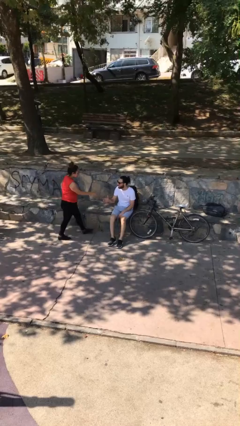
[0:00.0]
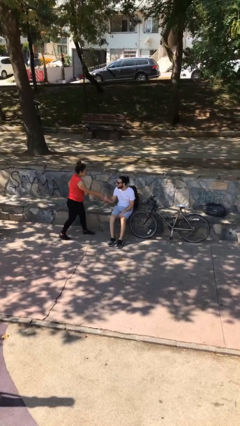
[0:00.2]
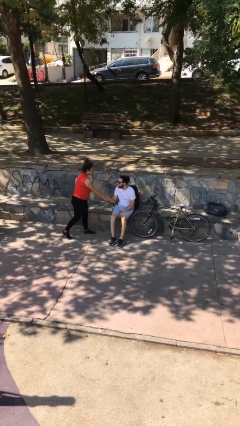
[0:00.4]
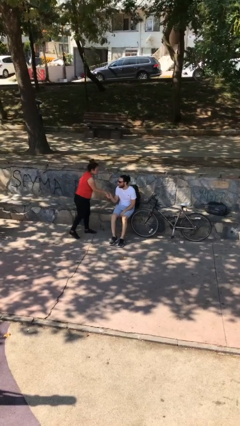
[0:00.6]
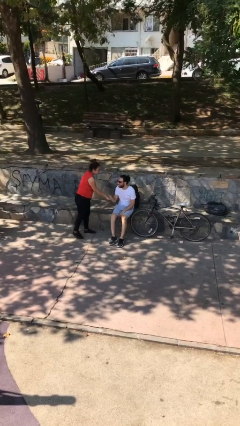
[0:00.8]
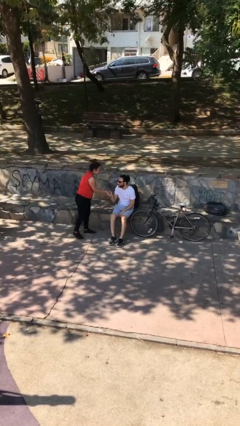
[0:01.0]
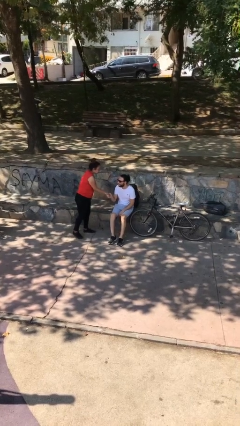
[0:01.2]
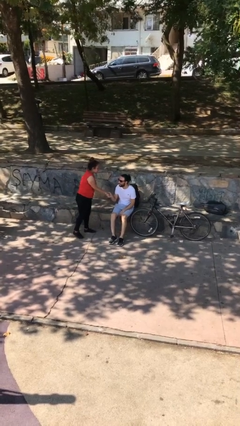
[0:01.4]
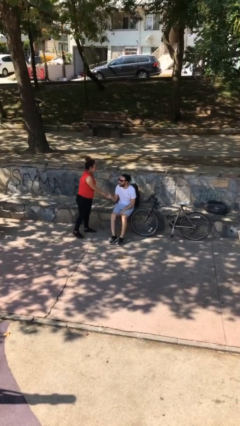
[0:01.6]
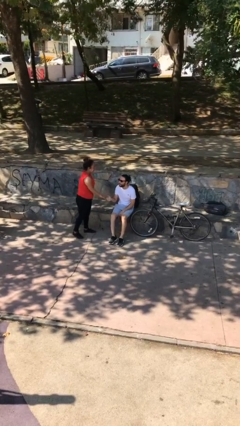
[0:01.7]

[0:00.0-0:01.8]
person shakes hand

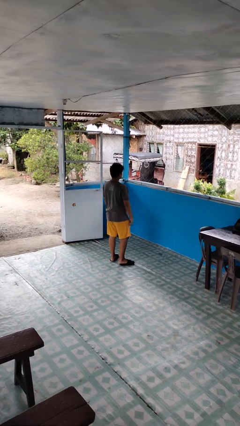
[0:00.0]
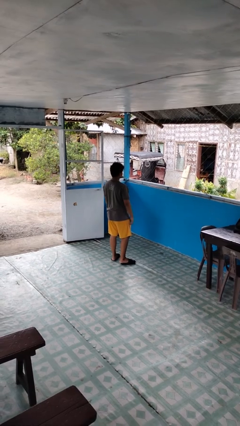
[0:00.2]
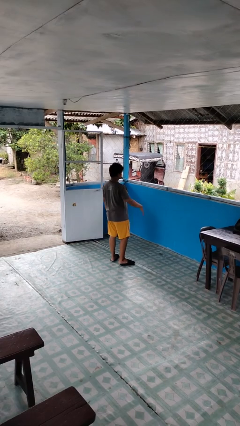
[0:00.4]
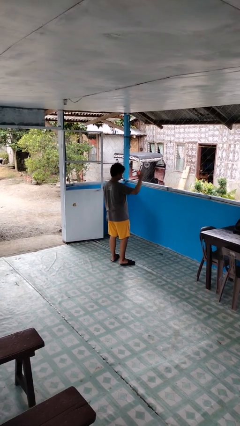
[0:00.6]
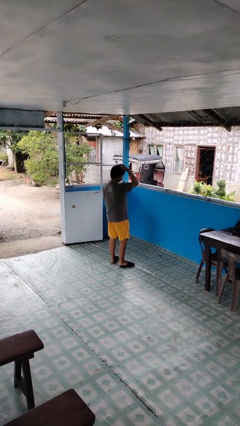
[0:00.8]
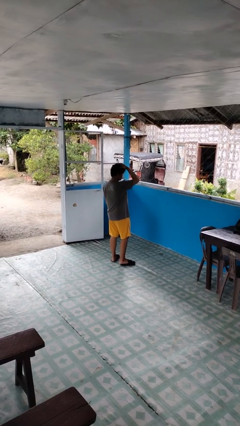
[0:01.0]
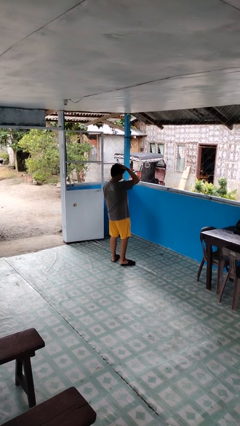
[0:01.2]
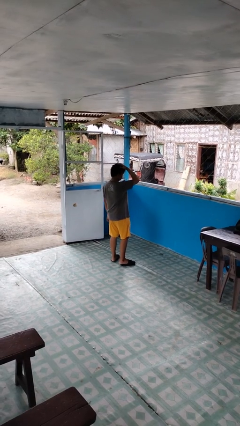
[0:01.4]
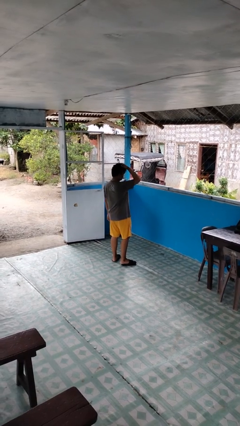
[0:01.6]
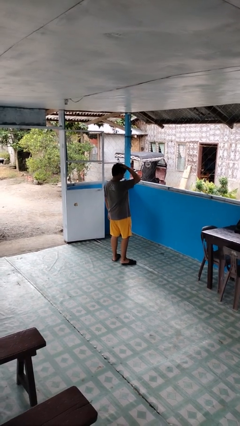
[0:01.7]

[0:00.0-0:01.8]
person pats head

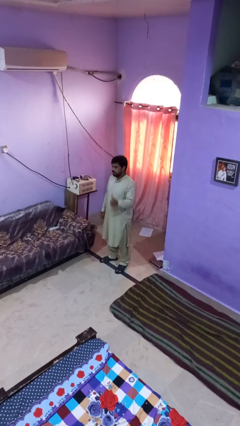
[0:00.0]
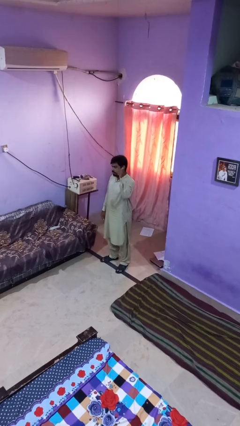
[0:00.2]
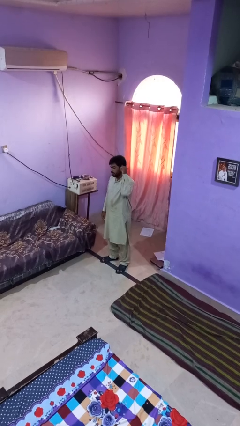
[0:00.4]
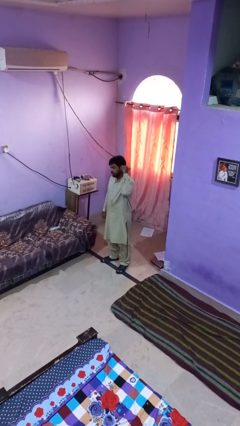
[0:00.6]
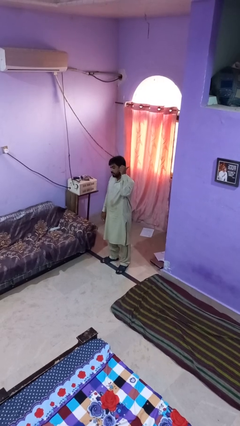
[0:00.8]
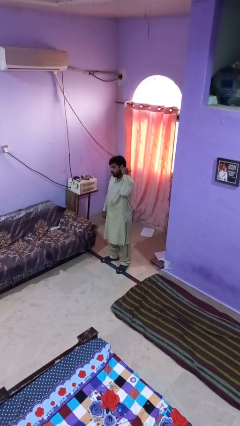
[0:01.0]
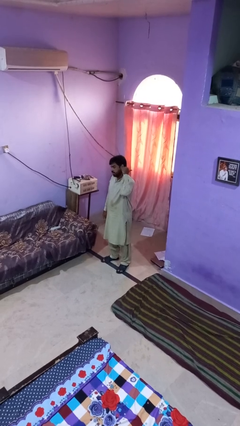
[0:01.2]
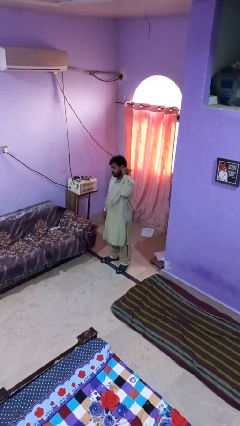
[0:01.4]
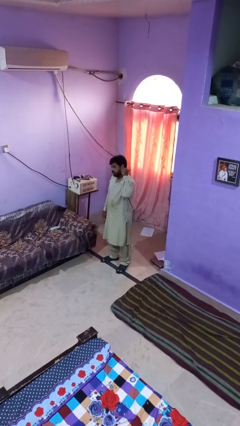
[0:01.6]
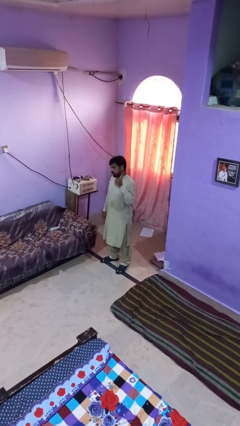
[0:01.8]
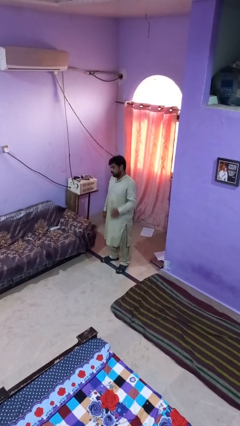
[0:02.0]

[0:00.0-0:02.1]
person gestures behind me

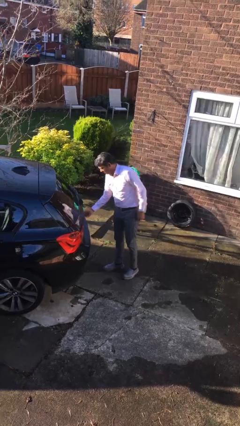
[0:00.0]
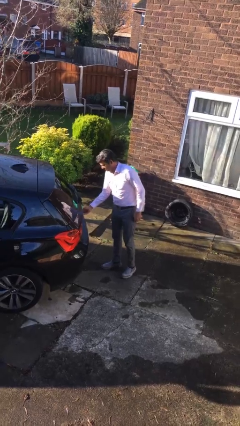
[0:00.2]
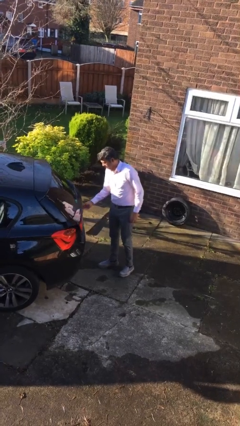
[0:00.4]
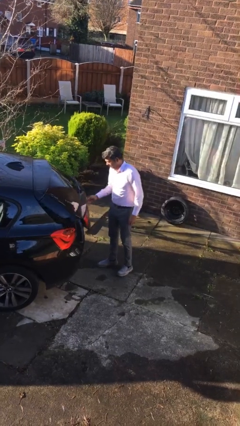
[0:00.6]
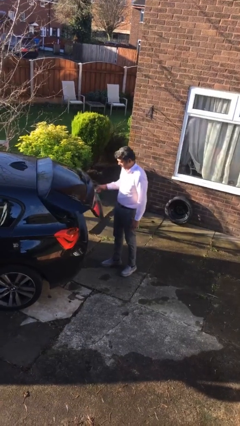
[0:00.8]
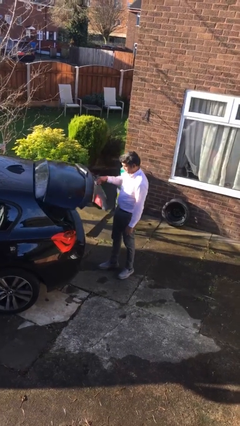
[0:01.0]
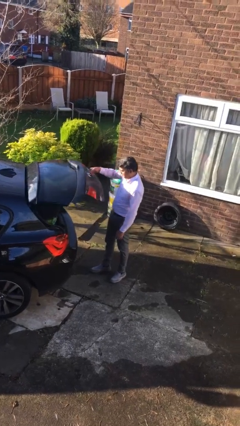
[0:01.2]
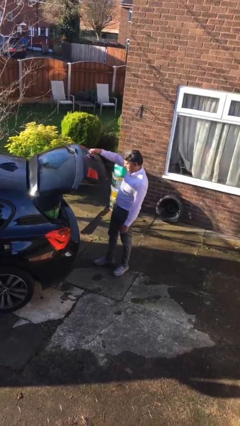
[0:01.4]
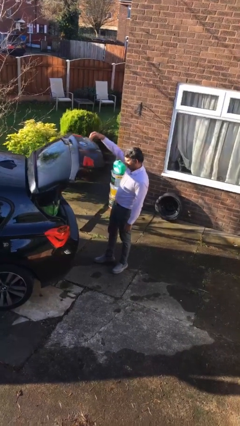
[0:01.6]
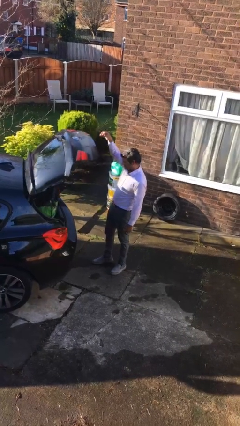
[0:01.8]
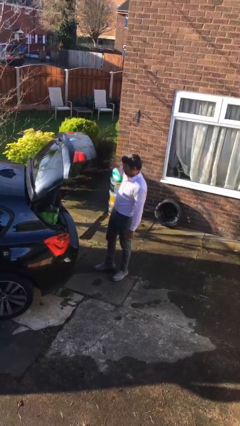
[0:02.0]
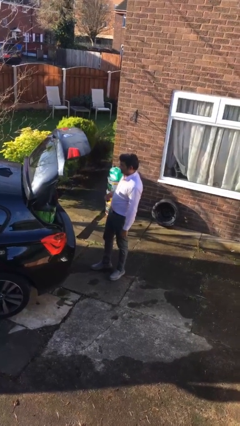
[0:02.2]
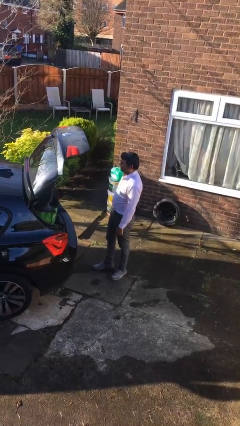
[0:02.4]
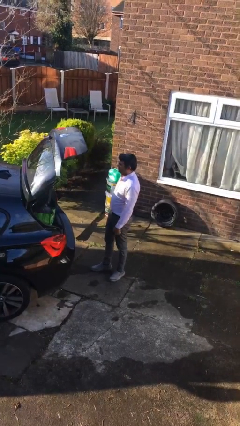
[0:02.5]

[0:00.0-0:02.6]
person opens car trunk

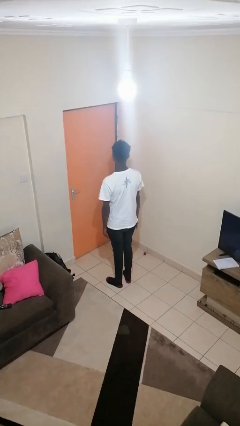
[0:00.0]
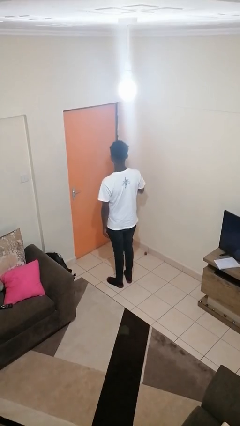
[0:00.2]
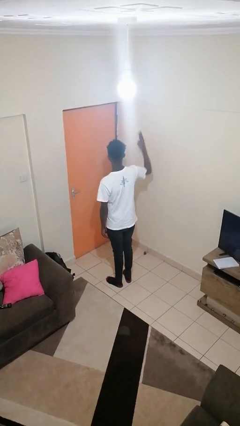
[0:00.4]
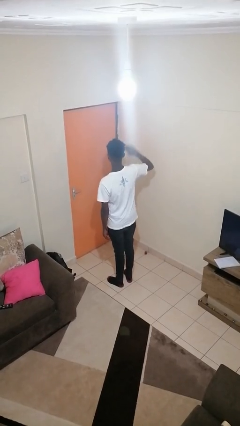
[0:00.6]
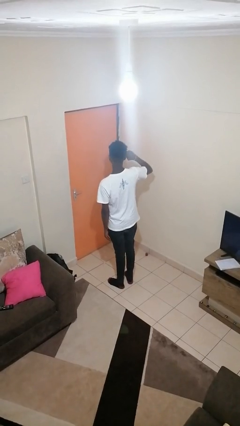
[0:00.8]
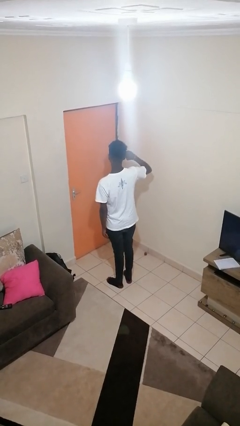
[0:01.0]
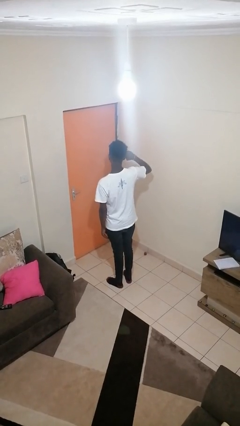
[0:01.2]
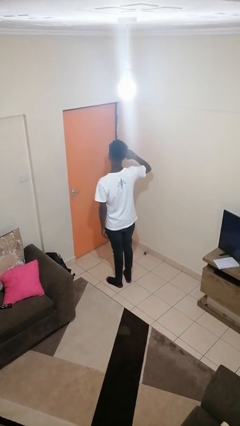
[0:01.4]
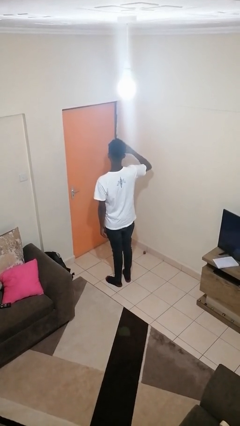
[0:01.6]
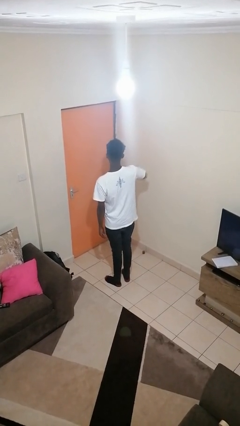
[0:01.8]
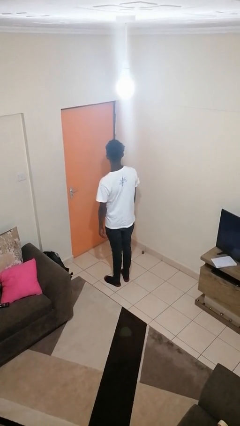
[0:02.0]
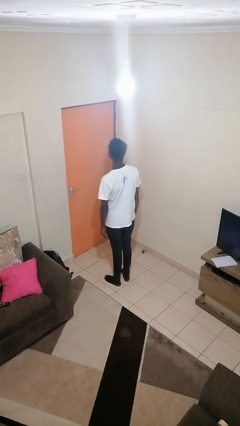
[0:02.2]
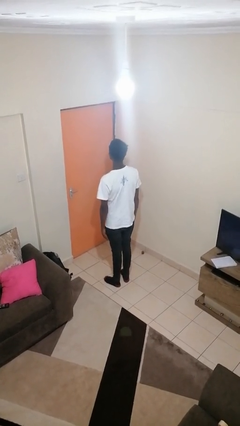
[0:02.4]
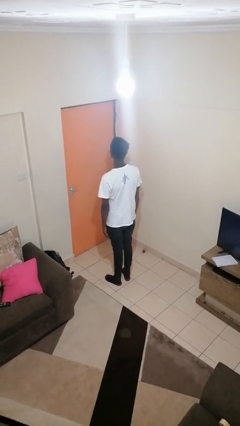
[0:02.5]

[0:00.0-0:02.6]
person salutes

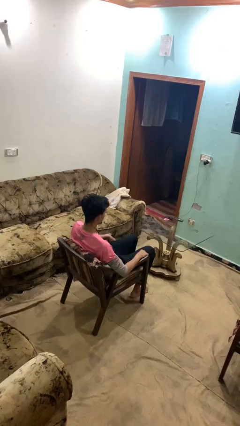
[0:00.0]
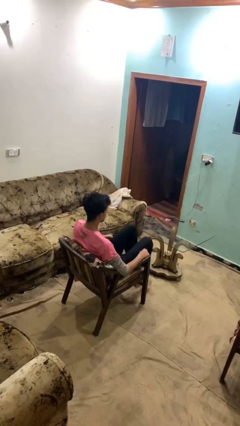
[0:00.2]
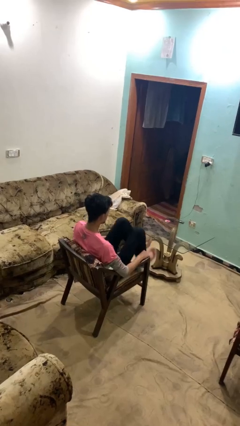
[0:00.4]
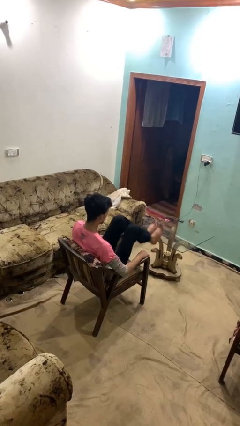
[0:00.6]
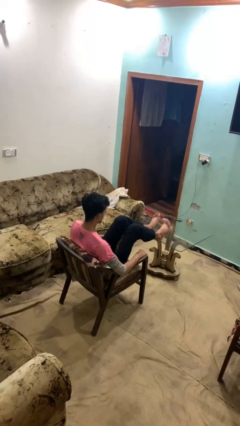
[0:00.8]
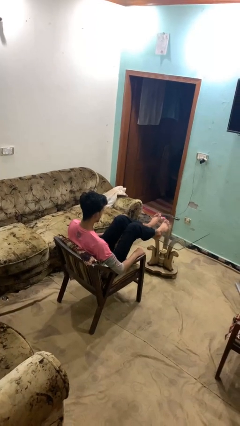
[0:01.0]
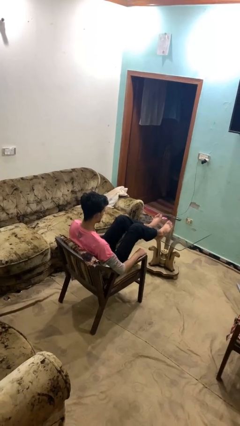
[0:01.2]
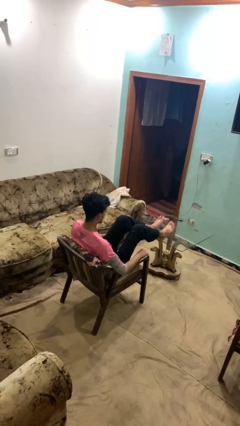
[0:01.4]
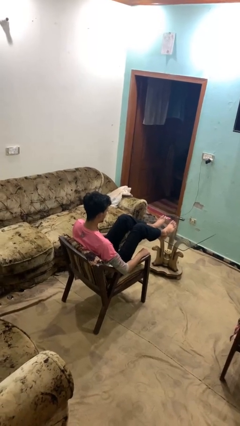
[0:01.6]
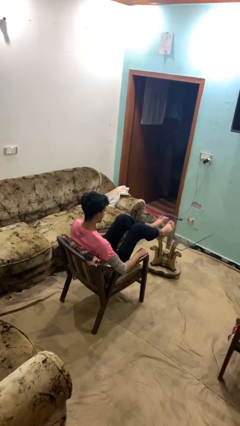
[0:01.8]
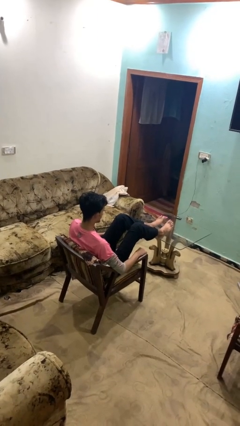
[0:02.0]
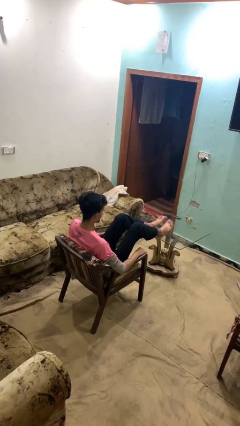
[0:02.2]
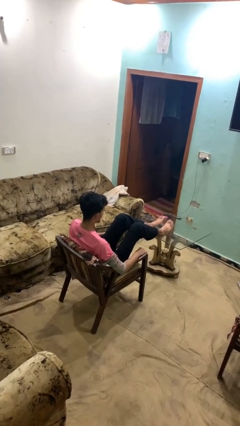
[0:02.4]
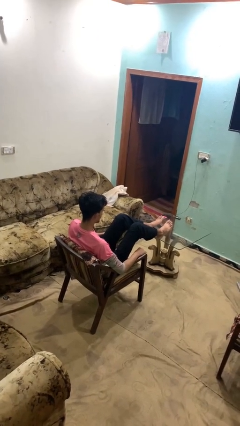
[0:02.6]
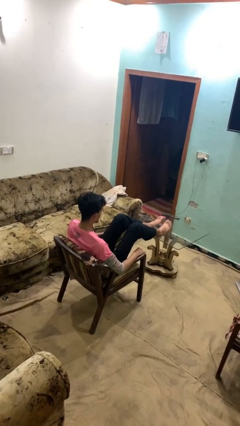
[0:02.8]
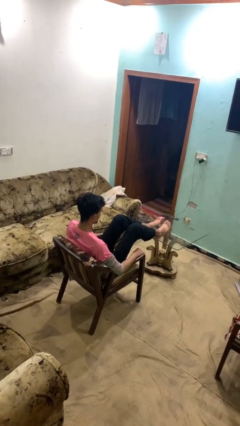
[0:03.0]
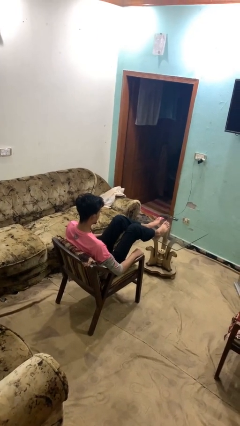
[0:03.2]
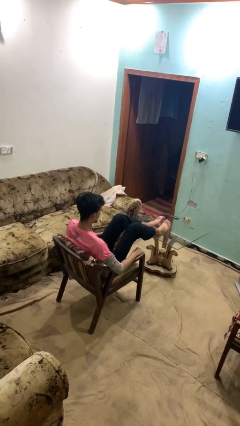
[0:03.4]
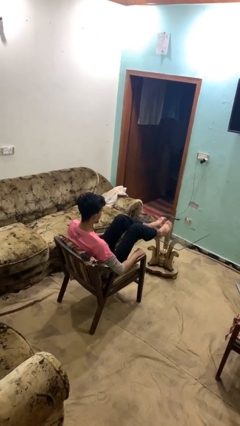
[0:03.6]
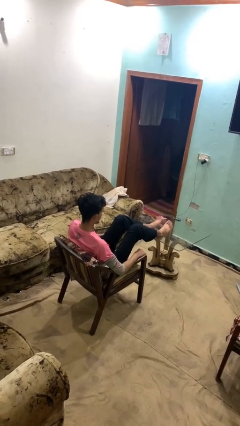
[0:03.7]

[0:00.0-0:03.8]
person puts feet up

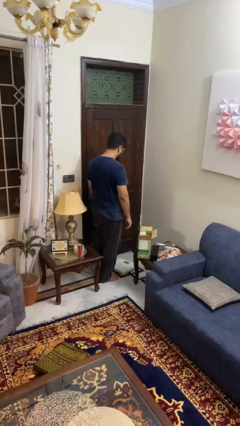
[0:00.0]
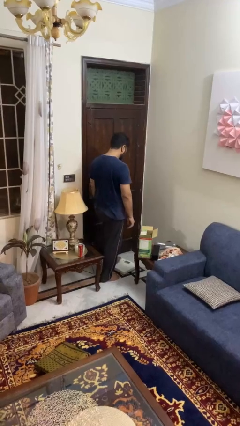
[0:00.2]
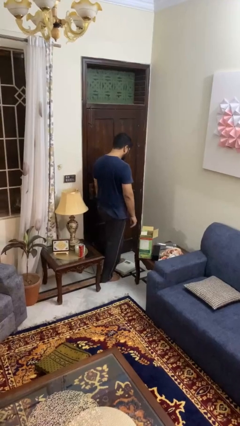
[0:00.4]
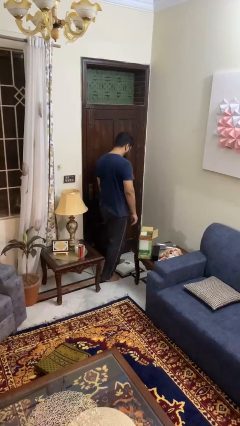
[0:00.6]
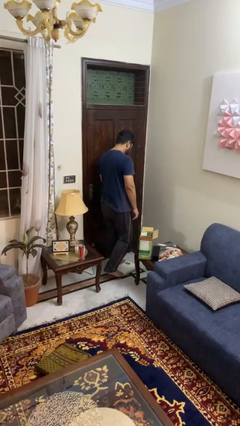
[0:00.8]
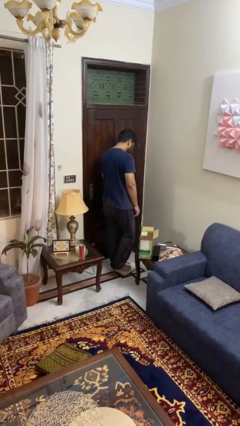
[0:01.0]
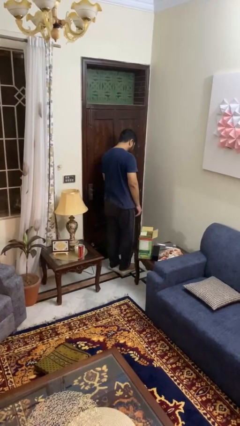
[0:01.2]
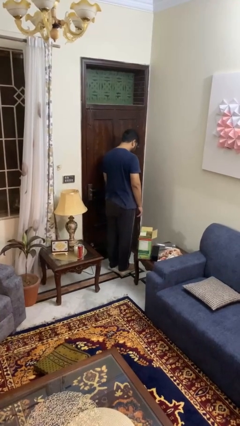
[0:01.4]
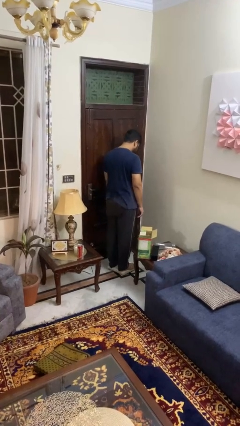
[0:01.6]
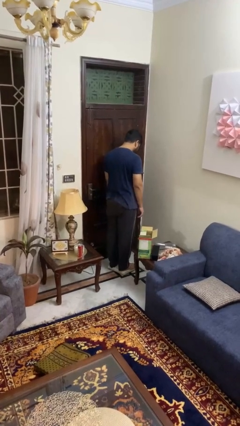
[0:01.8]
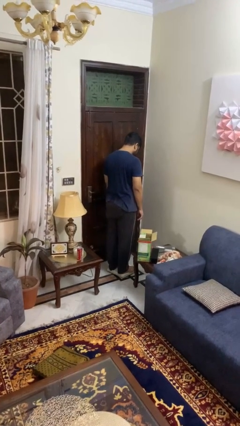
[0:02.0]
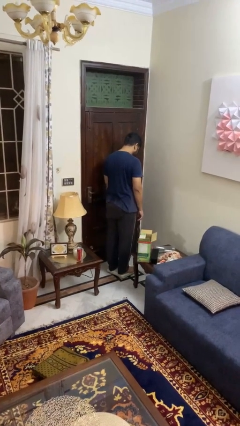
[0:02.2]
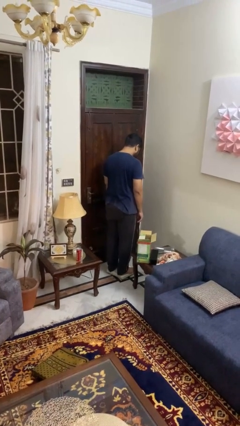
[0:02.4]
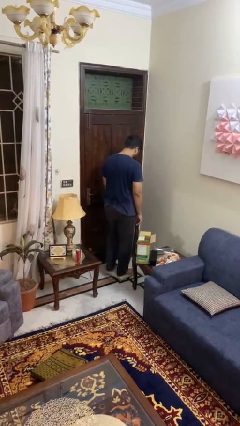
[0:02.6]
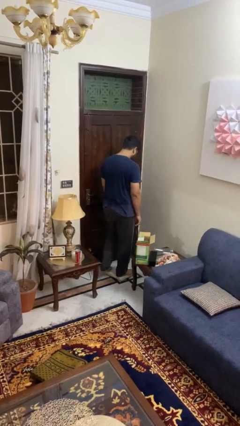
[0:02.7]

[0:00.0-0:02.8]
person uses bodyweight scale
